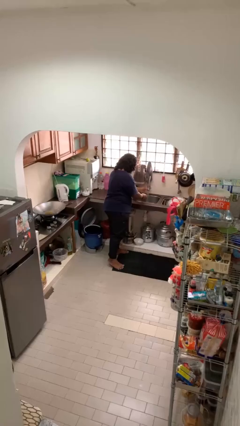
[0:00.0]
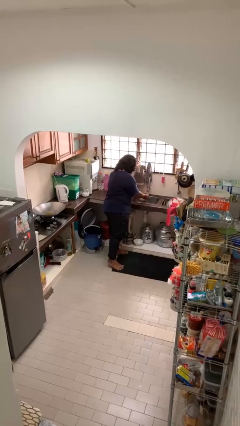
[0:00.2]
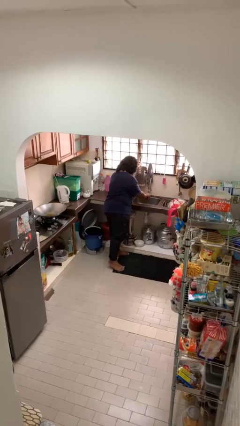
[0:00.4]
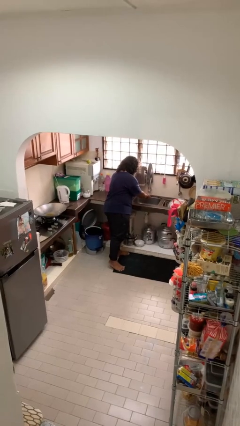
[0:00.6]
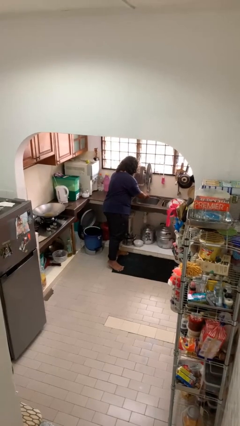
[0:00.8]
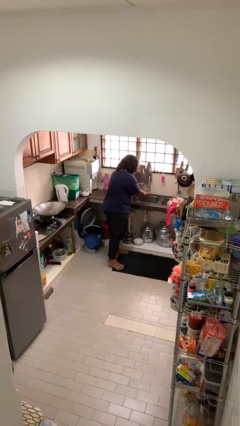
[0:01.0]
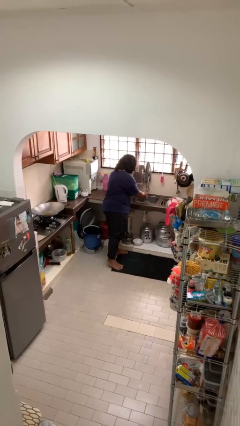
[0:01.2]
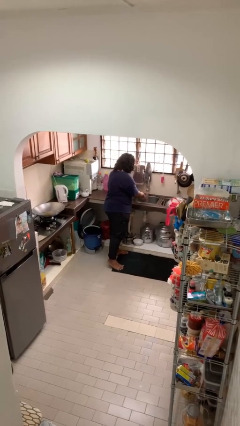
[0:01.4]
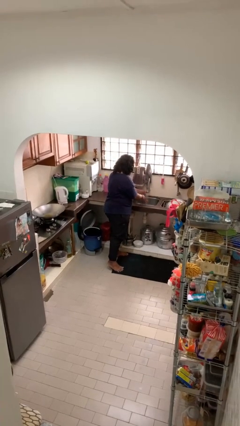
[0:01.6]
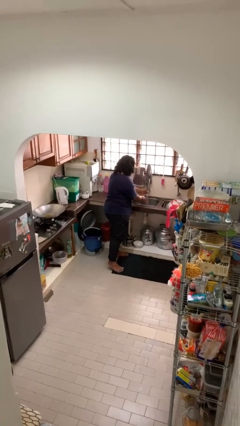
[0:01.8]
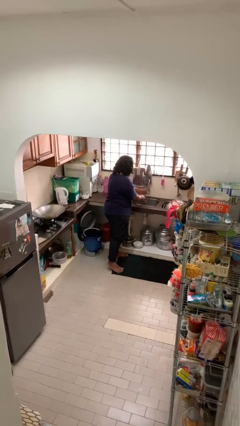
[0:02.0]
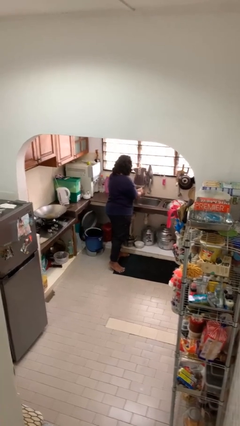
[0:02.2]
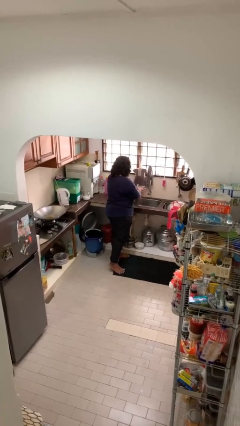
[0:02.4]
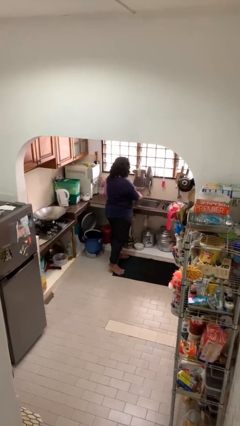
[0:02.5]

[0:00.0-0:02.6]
person washes hands

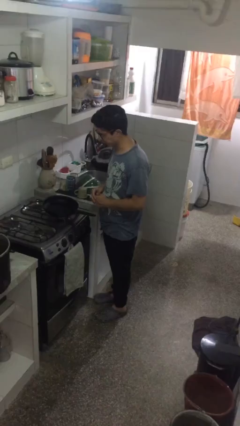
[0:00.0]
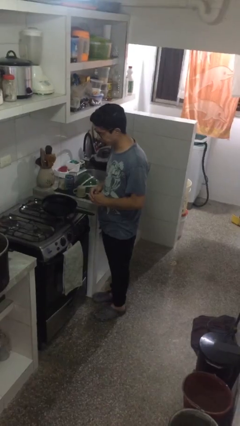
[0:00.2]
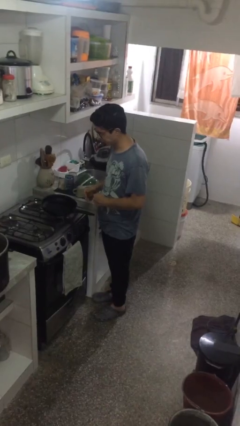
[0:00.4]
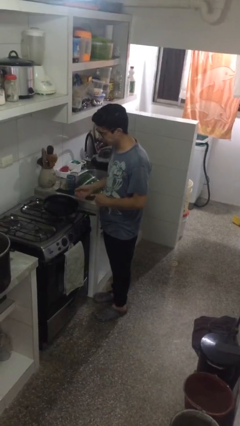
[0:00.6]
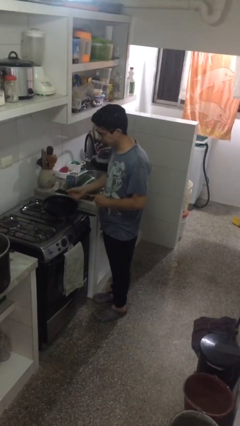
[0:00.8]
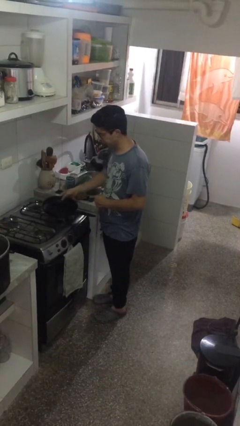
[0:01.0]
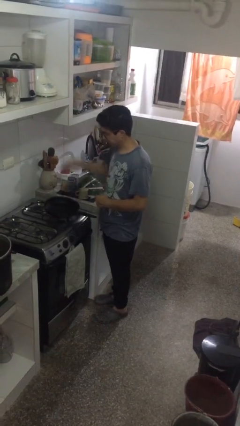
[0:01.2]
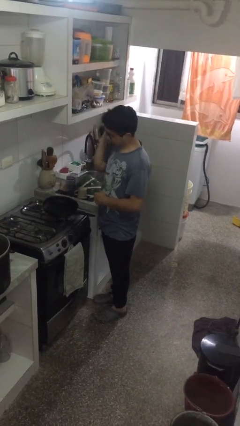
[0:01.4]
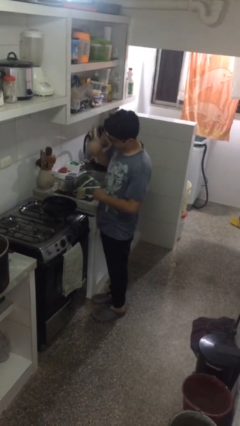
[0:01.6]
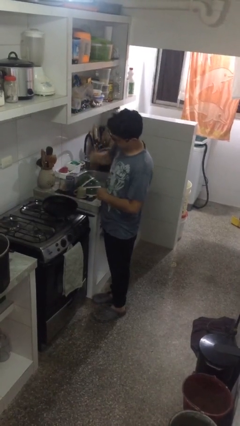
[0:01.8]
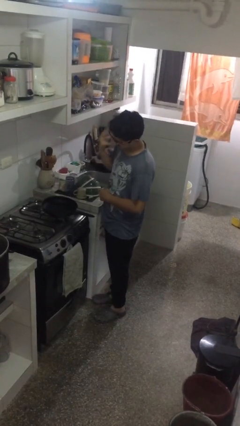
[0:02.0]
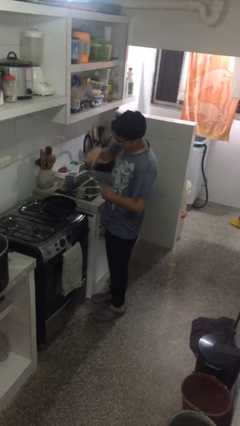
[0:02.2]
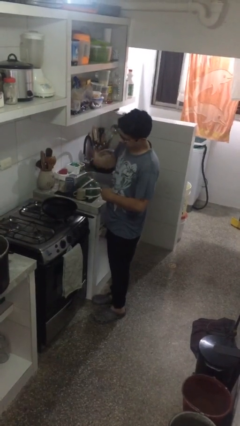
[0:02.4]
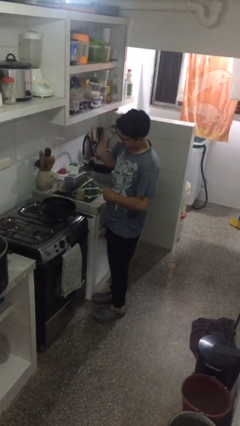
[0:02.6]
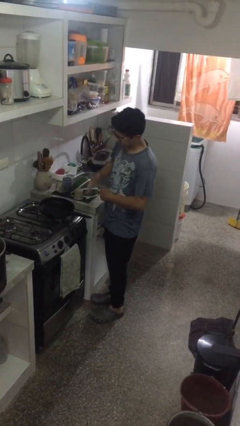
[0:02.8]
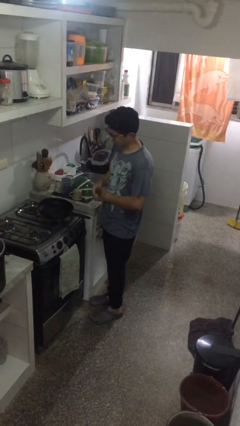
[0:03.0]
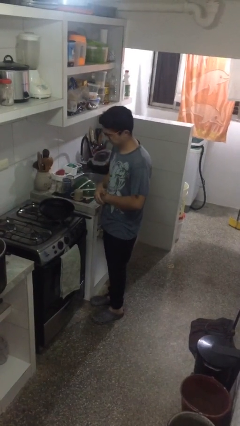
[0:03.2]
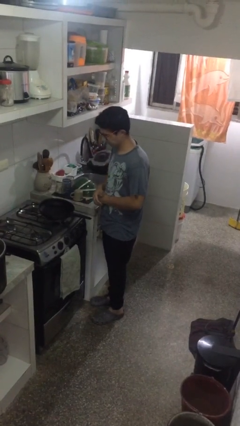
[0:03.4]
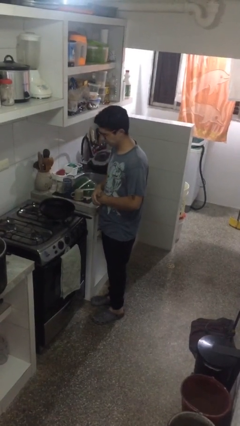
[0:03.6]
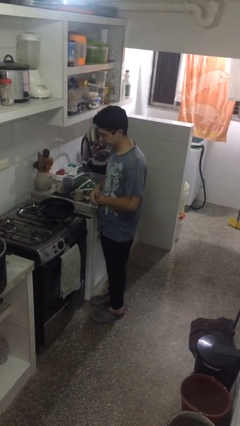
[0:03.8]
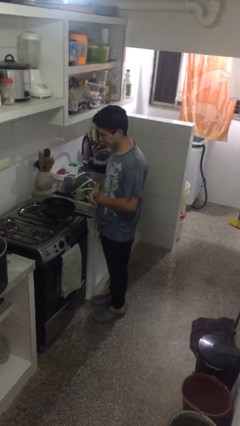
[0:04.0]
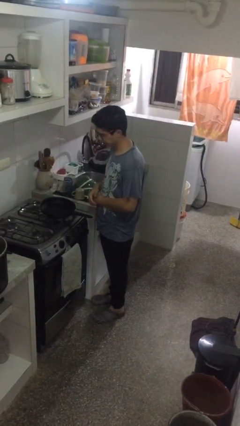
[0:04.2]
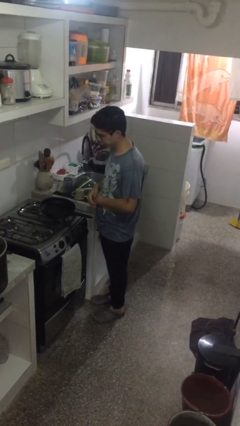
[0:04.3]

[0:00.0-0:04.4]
person burns hand

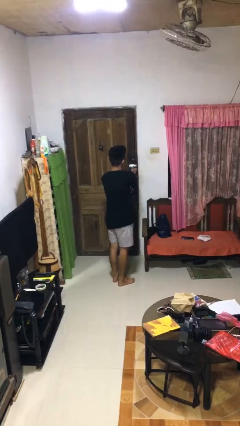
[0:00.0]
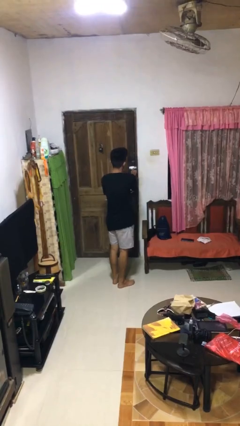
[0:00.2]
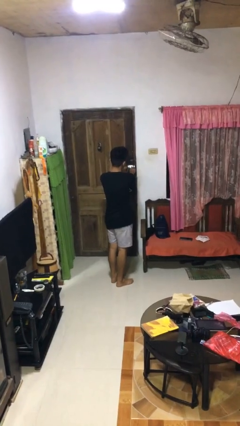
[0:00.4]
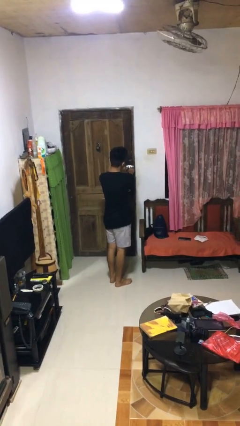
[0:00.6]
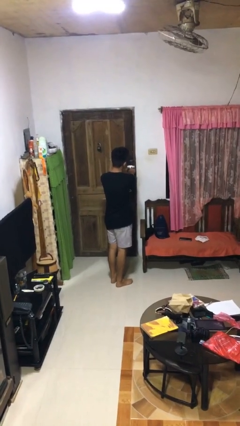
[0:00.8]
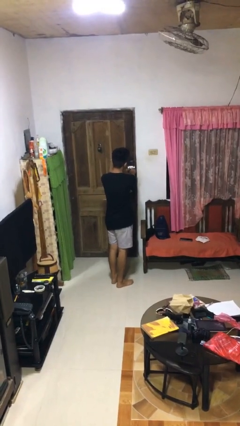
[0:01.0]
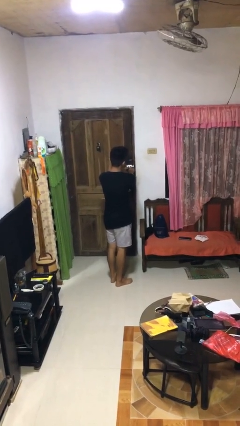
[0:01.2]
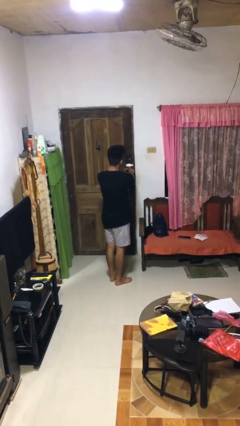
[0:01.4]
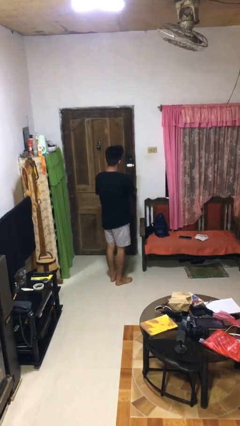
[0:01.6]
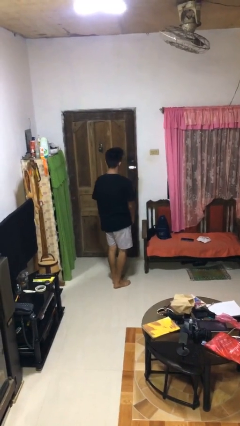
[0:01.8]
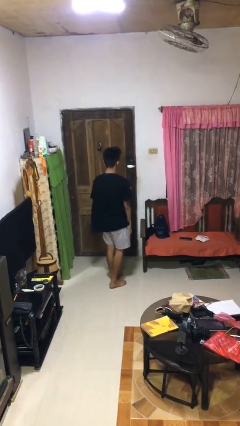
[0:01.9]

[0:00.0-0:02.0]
person locks door with keys

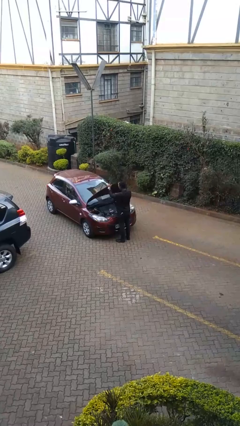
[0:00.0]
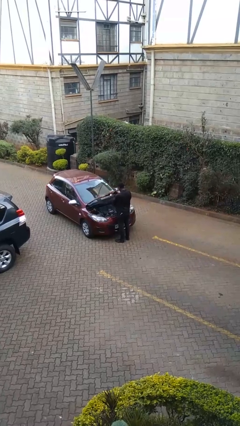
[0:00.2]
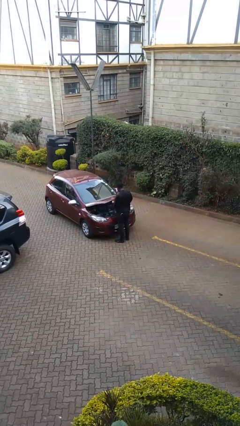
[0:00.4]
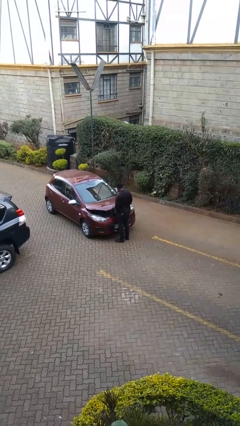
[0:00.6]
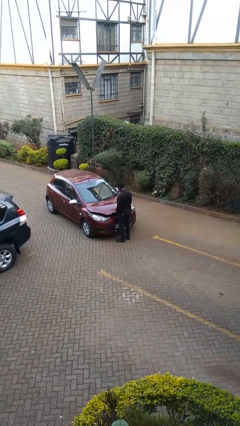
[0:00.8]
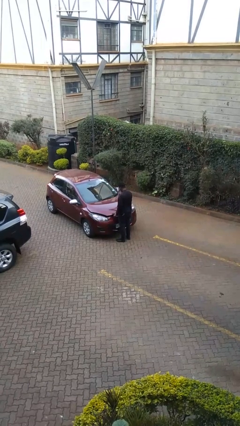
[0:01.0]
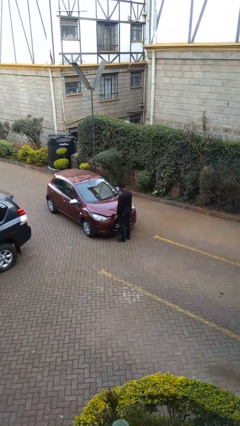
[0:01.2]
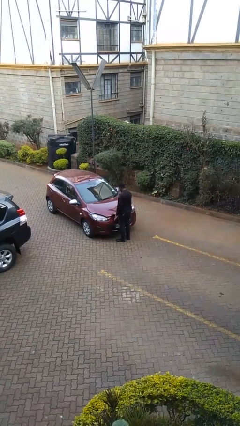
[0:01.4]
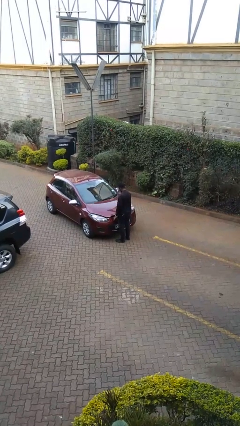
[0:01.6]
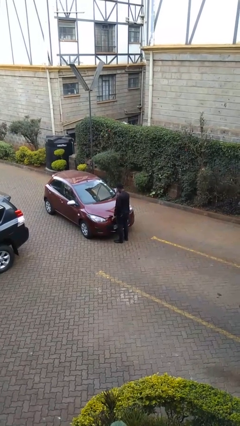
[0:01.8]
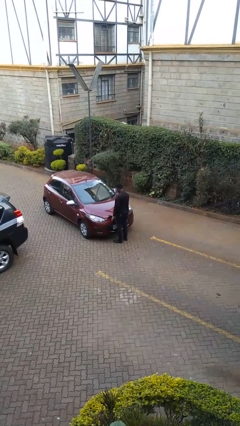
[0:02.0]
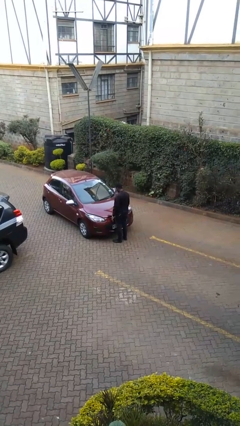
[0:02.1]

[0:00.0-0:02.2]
person closes car hood

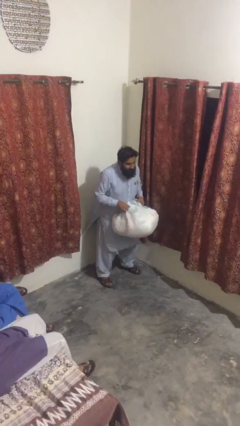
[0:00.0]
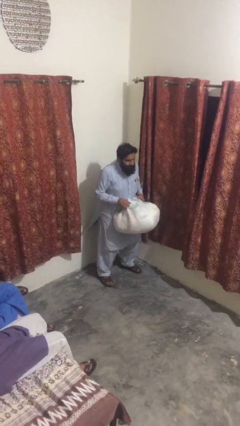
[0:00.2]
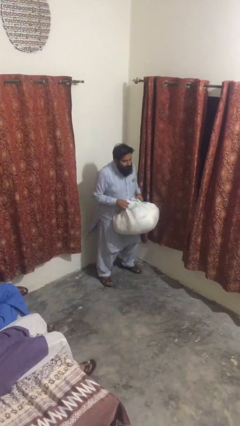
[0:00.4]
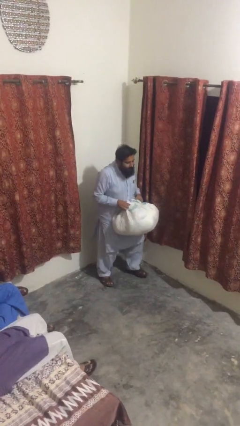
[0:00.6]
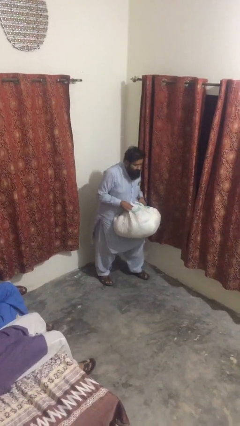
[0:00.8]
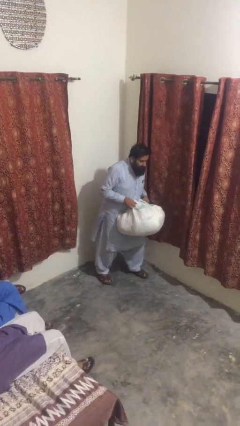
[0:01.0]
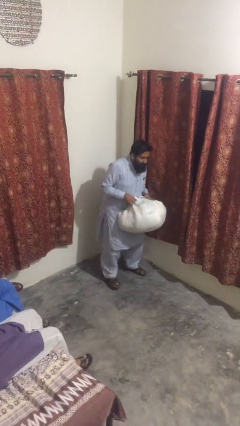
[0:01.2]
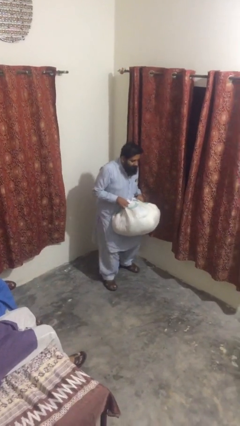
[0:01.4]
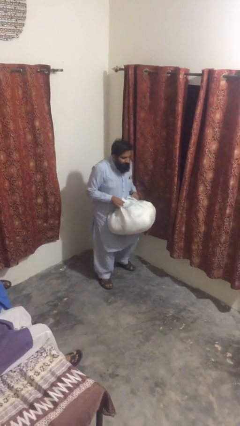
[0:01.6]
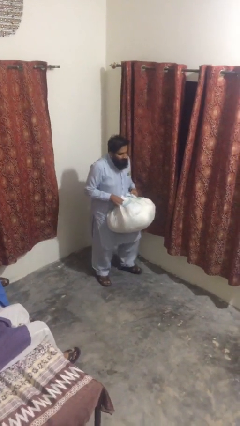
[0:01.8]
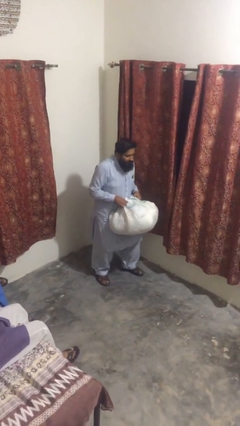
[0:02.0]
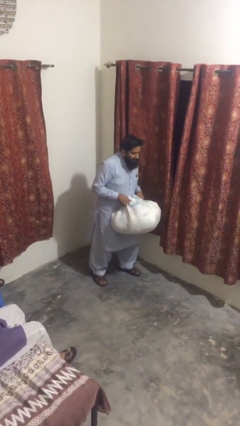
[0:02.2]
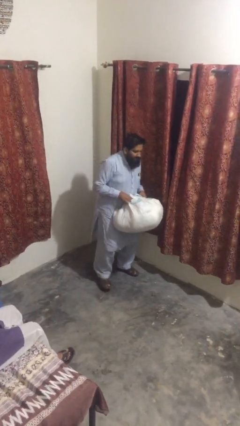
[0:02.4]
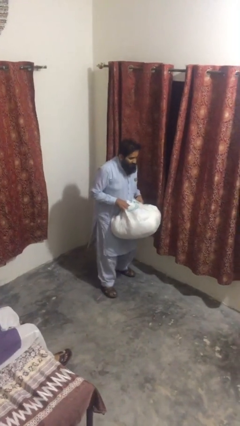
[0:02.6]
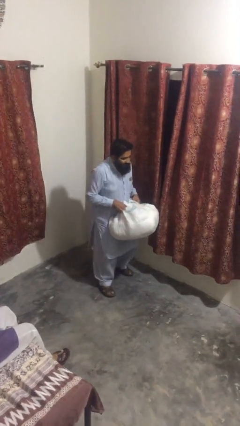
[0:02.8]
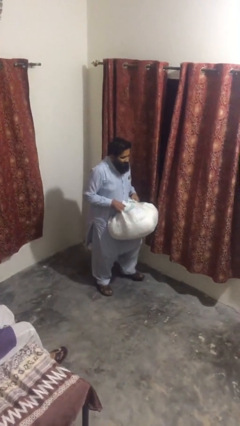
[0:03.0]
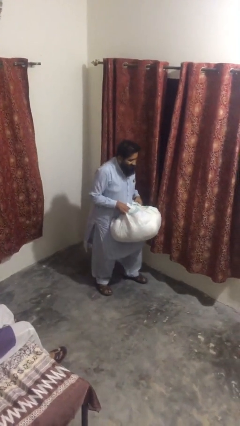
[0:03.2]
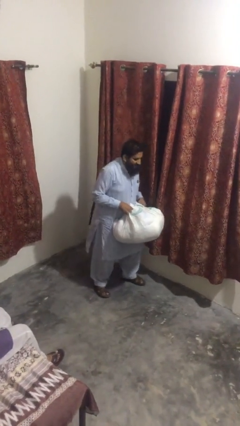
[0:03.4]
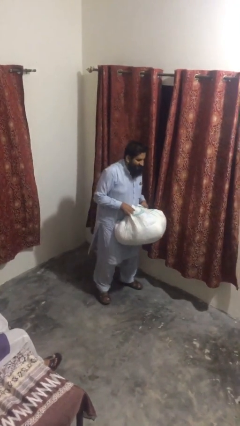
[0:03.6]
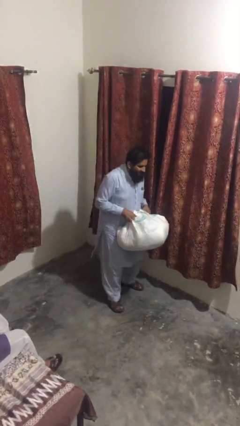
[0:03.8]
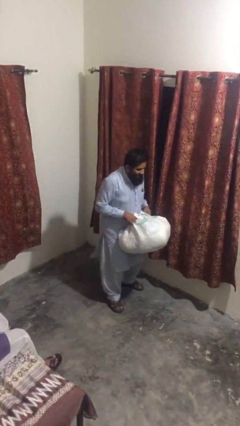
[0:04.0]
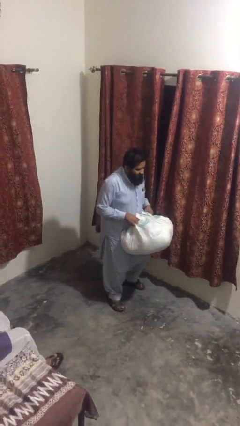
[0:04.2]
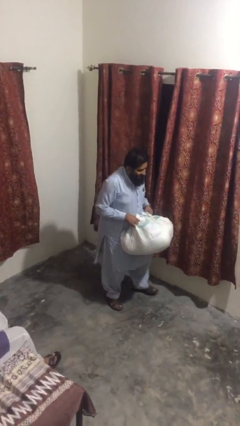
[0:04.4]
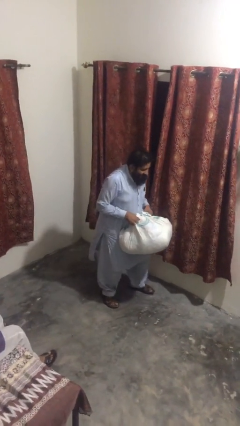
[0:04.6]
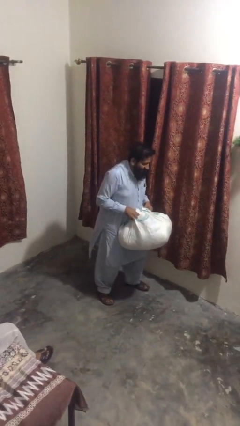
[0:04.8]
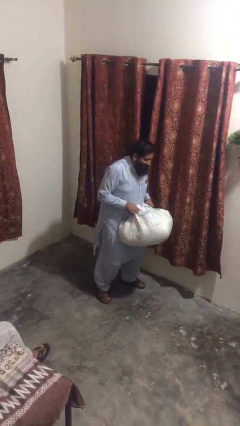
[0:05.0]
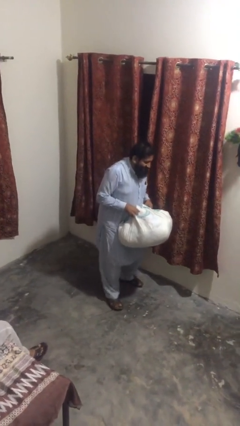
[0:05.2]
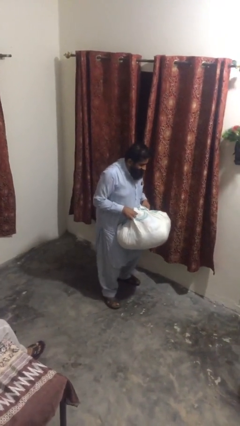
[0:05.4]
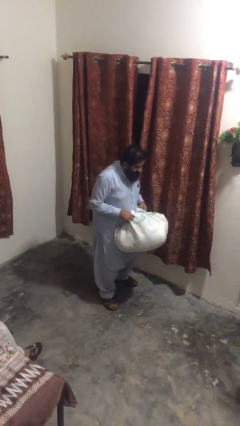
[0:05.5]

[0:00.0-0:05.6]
person carries heavy object

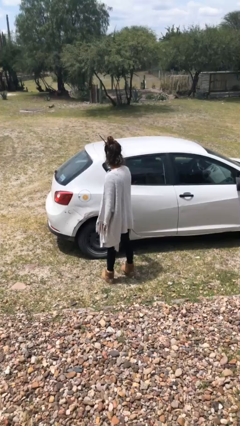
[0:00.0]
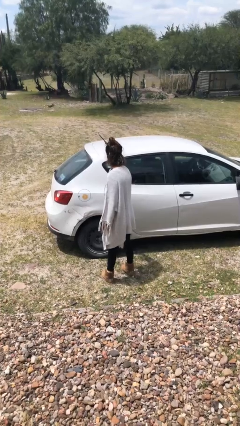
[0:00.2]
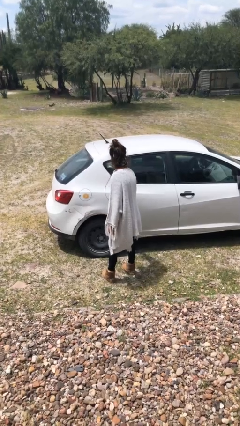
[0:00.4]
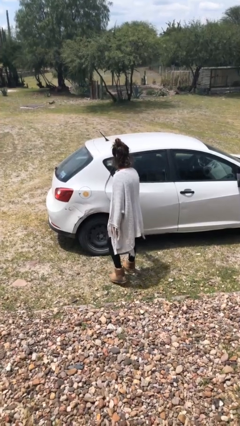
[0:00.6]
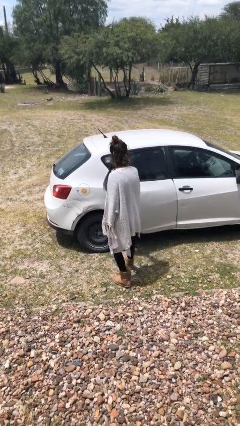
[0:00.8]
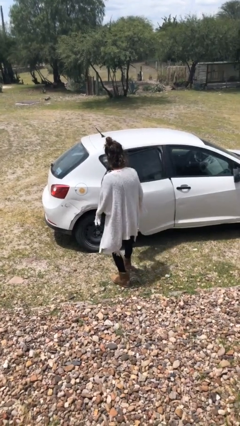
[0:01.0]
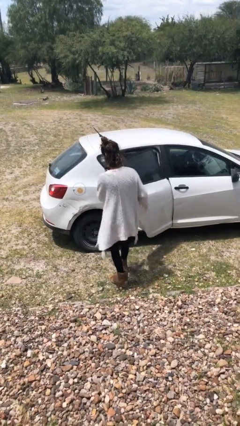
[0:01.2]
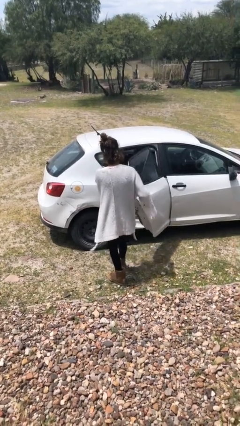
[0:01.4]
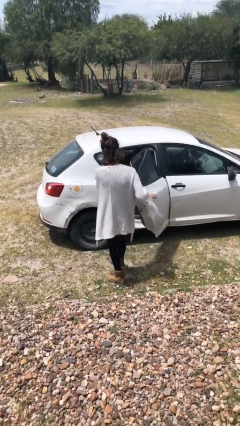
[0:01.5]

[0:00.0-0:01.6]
person opens car door
